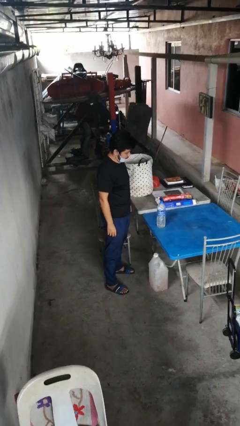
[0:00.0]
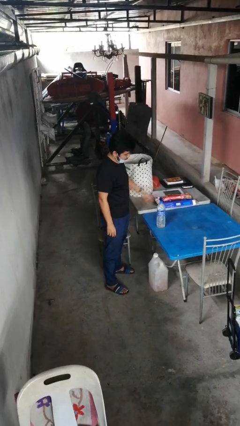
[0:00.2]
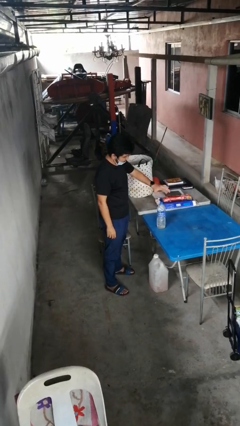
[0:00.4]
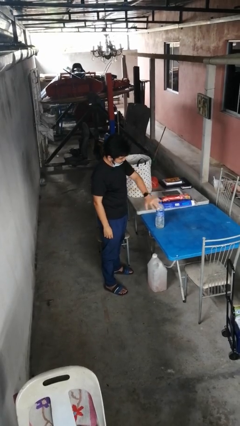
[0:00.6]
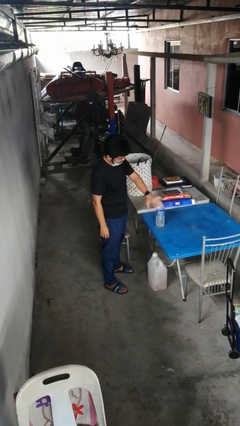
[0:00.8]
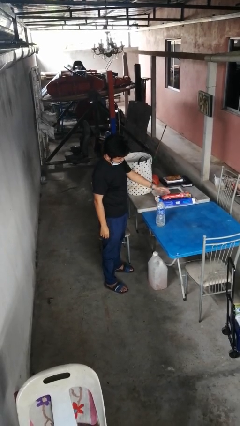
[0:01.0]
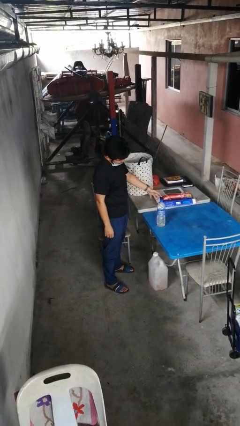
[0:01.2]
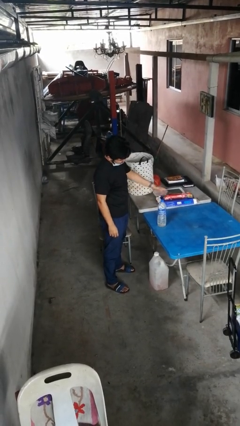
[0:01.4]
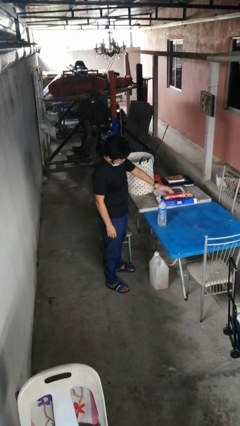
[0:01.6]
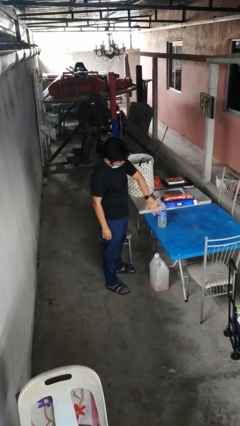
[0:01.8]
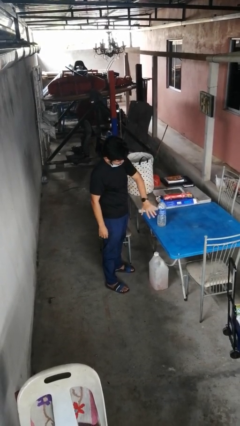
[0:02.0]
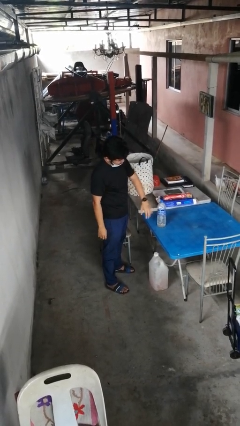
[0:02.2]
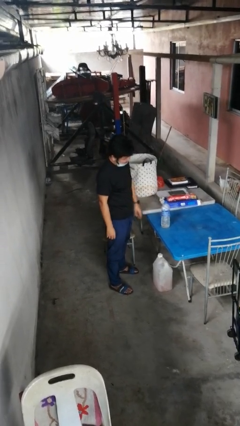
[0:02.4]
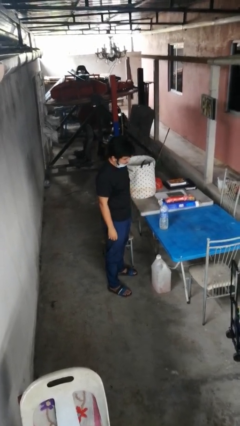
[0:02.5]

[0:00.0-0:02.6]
person waves hand over object

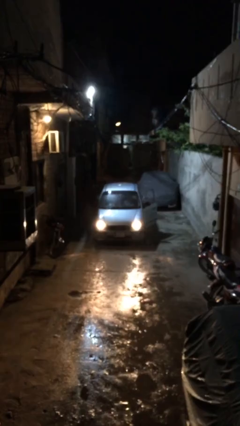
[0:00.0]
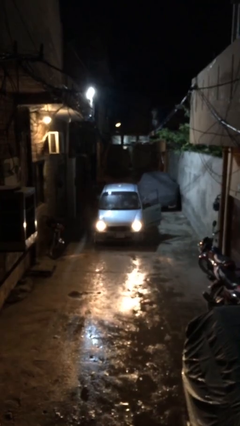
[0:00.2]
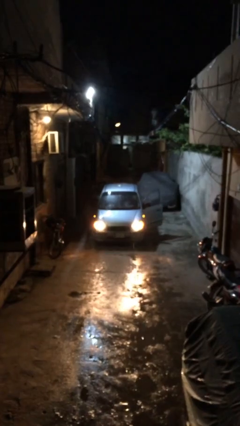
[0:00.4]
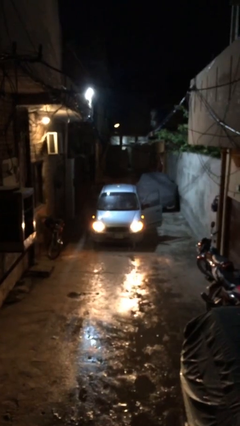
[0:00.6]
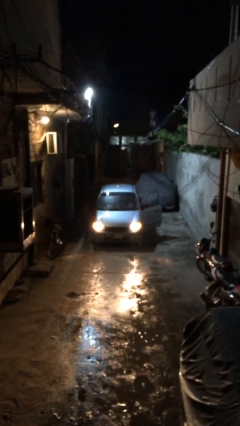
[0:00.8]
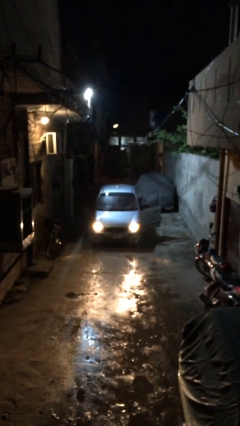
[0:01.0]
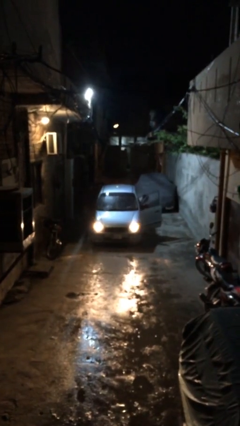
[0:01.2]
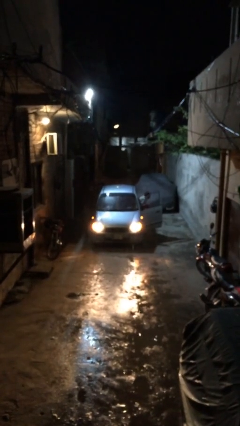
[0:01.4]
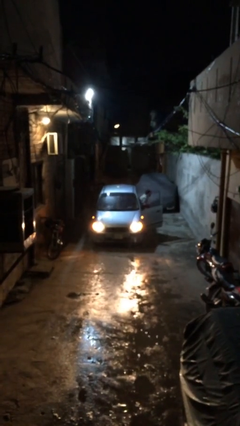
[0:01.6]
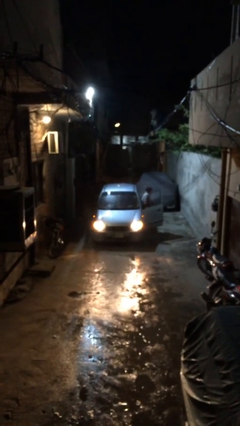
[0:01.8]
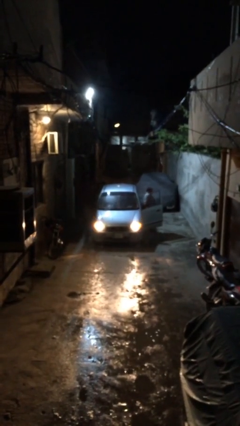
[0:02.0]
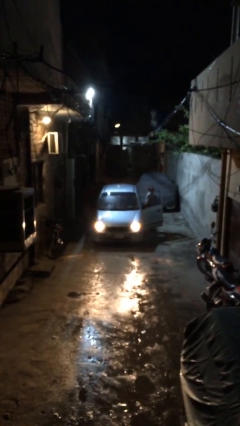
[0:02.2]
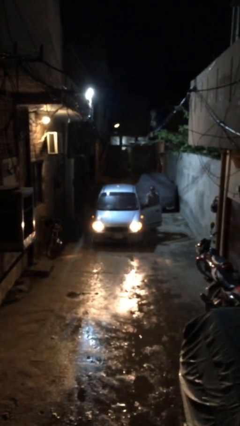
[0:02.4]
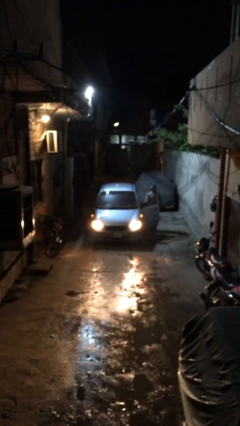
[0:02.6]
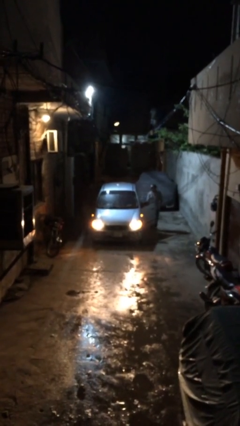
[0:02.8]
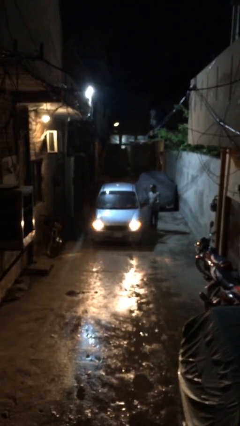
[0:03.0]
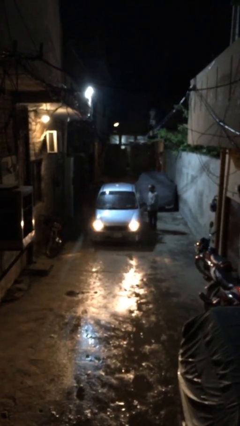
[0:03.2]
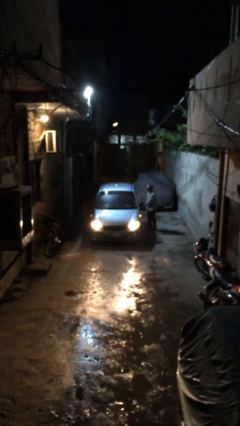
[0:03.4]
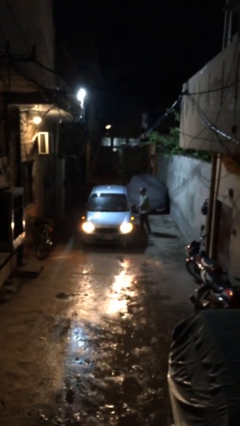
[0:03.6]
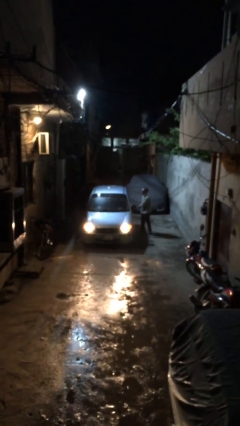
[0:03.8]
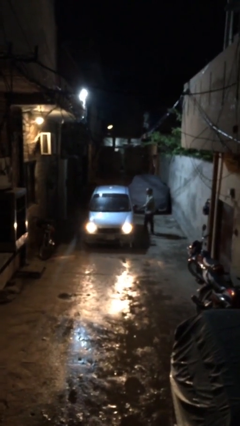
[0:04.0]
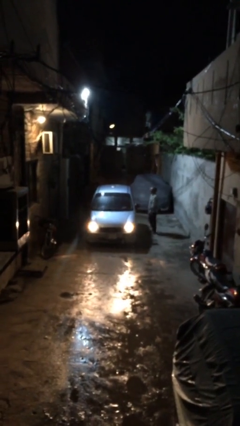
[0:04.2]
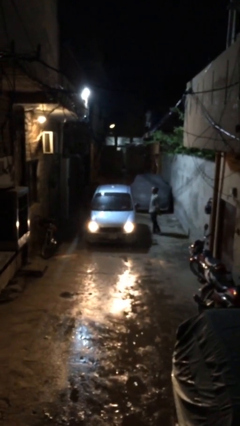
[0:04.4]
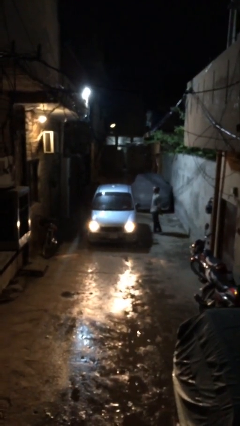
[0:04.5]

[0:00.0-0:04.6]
car drops off person

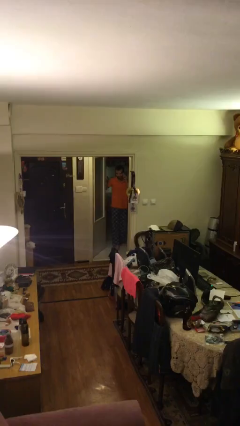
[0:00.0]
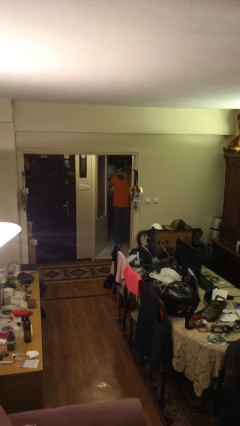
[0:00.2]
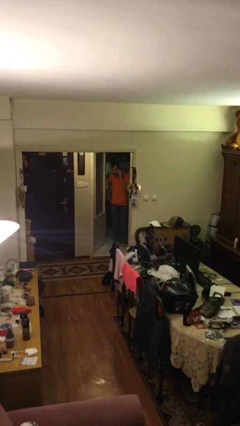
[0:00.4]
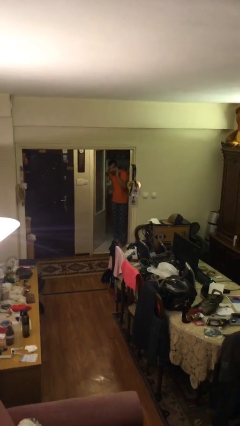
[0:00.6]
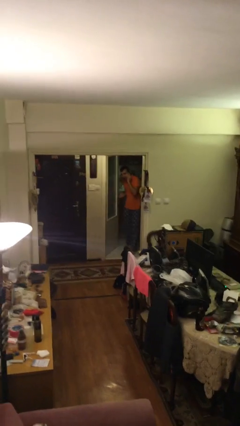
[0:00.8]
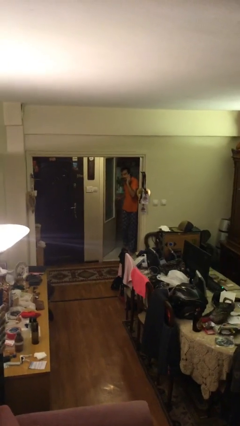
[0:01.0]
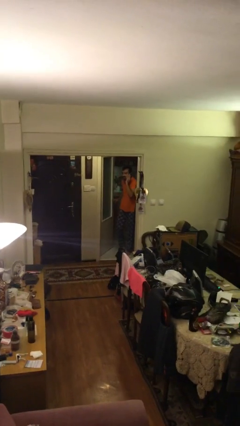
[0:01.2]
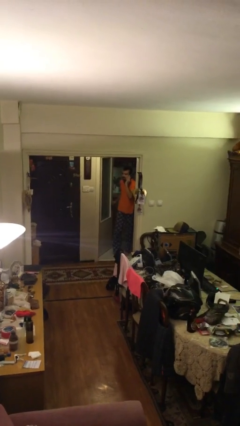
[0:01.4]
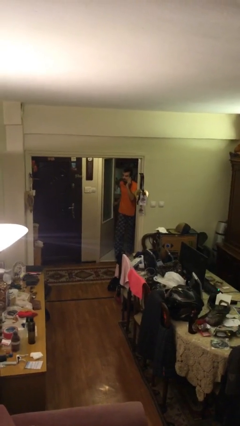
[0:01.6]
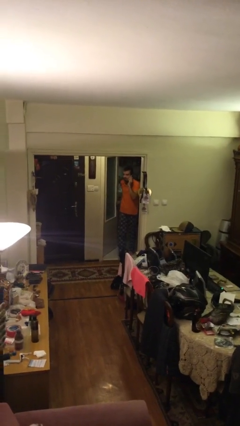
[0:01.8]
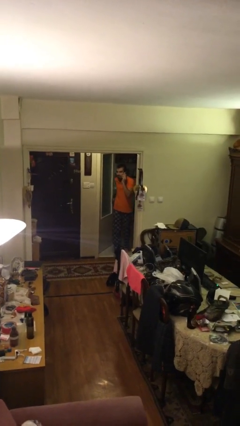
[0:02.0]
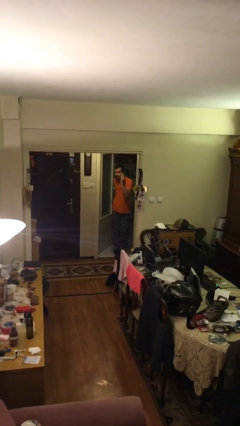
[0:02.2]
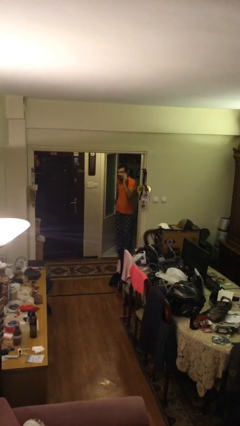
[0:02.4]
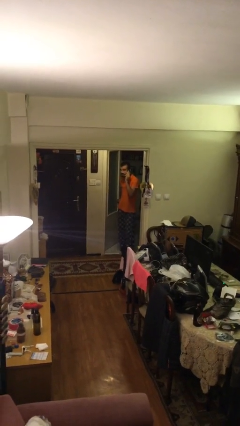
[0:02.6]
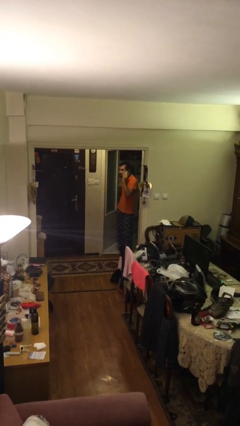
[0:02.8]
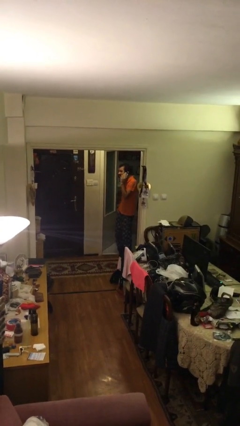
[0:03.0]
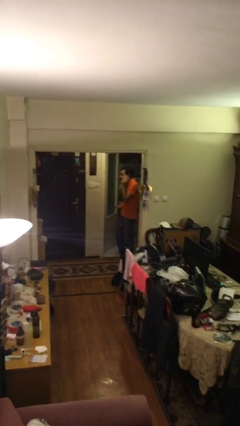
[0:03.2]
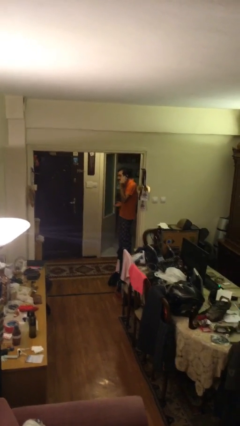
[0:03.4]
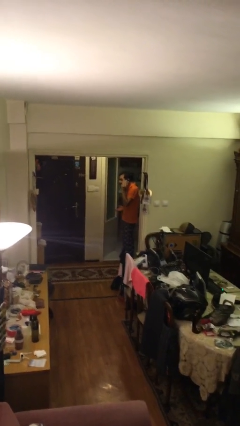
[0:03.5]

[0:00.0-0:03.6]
person enters scene through structure

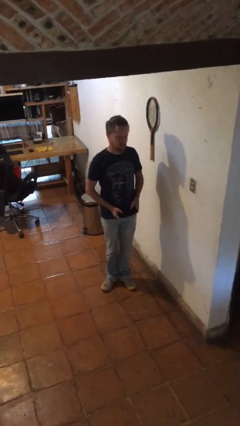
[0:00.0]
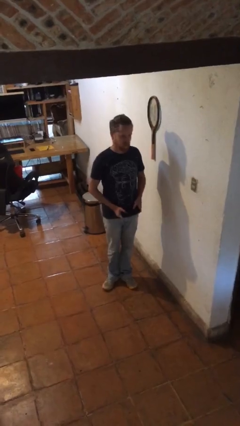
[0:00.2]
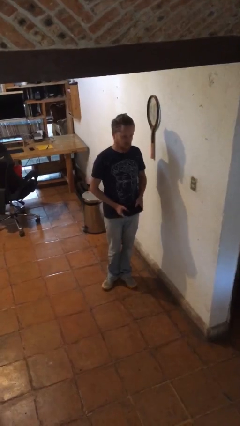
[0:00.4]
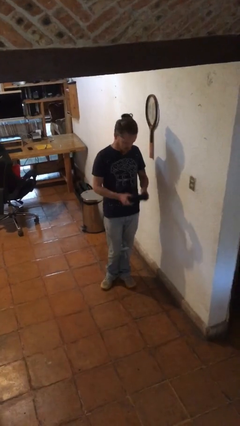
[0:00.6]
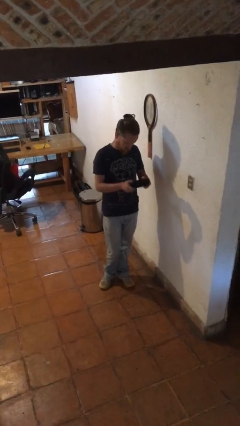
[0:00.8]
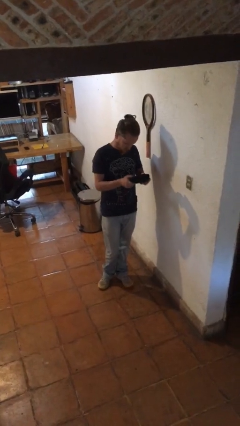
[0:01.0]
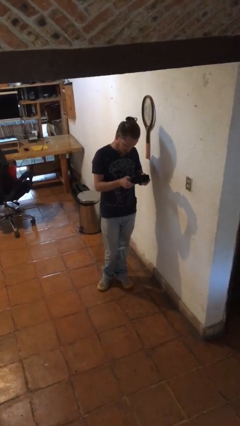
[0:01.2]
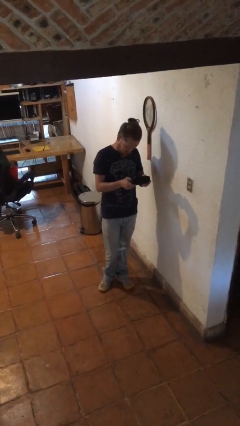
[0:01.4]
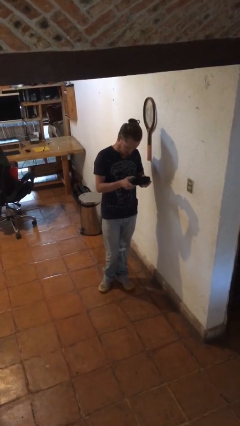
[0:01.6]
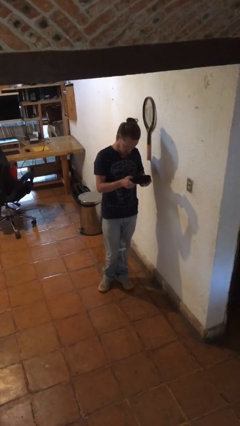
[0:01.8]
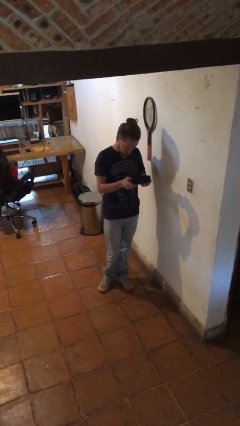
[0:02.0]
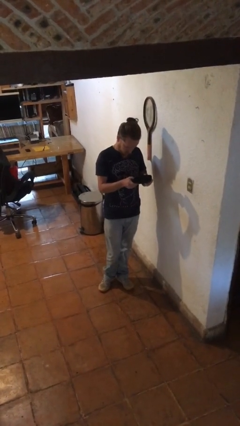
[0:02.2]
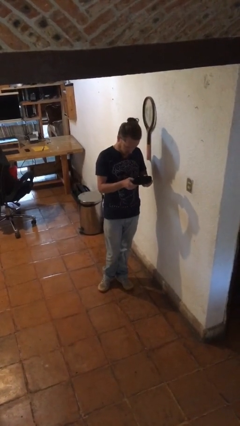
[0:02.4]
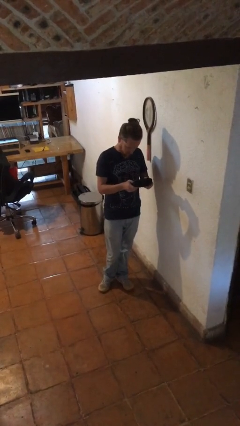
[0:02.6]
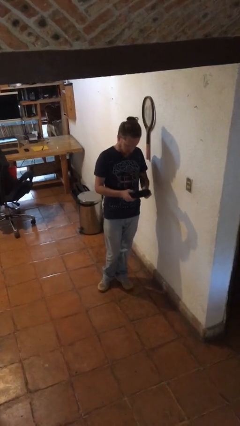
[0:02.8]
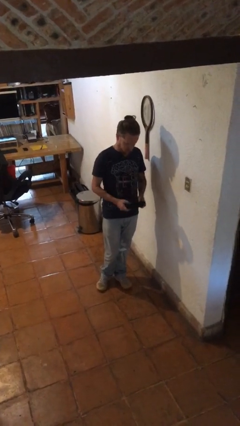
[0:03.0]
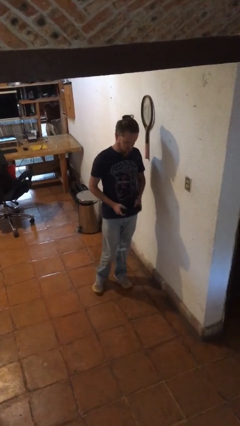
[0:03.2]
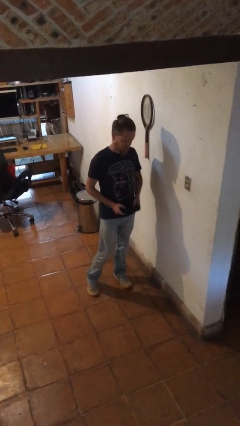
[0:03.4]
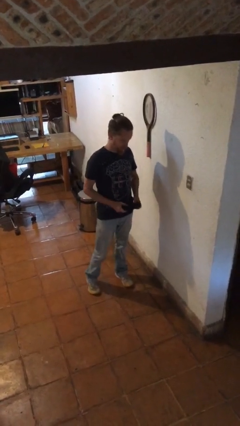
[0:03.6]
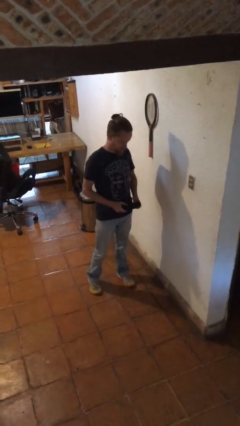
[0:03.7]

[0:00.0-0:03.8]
person interacts with handheld game

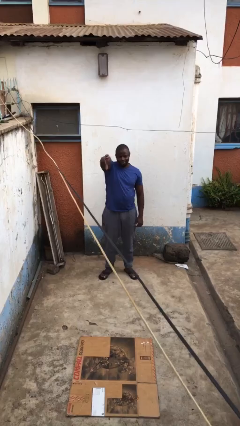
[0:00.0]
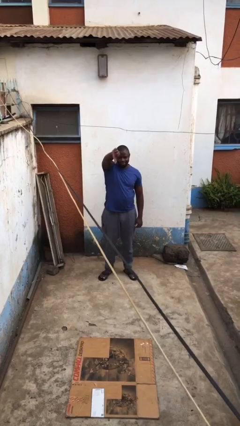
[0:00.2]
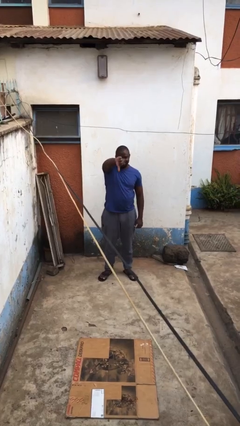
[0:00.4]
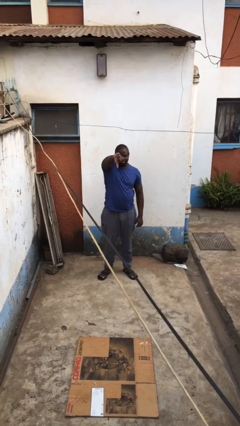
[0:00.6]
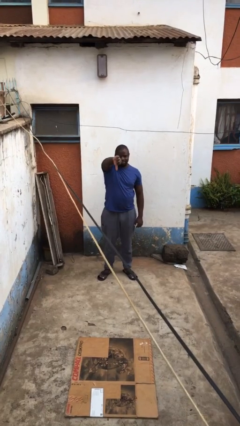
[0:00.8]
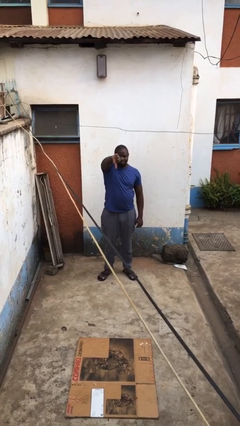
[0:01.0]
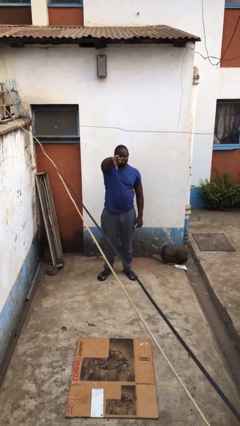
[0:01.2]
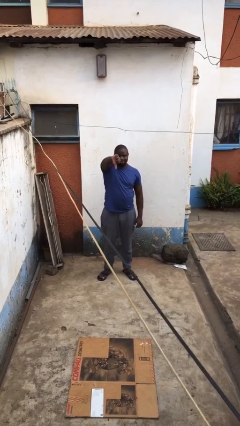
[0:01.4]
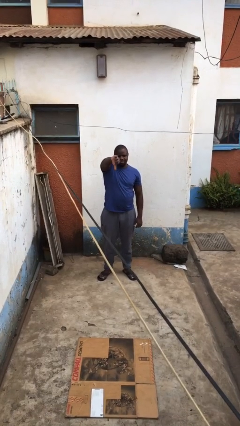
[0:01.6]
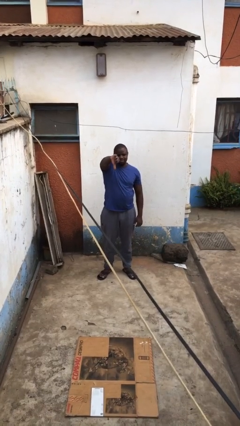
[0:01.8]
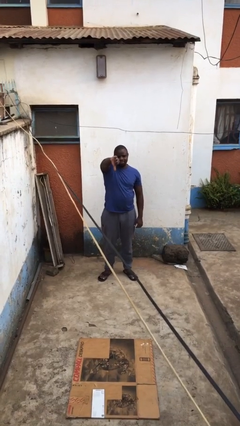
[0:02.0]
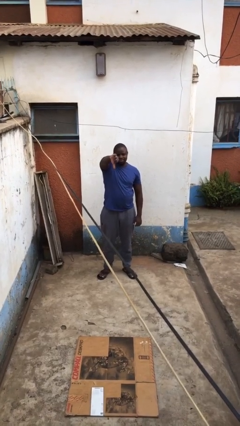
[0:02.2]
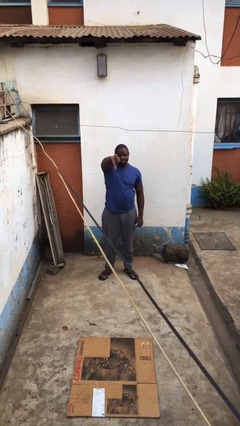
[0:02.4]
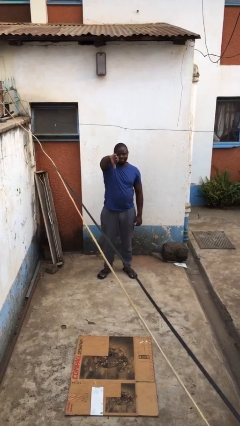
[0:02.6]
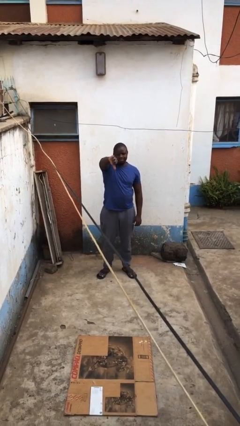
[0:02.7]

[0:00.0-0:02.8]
person gestures thumbs down

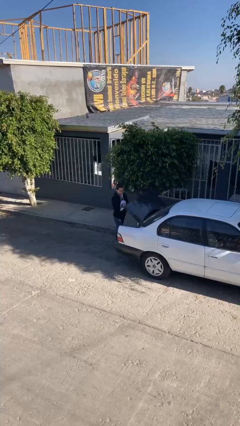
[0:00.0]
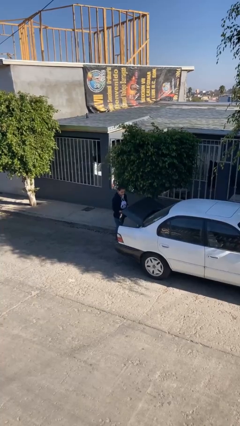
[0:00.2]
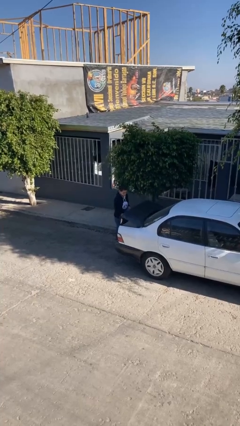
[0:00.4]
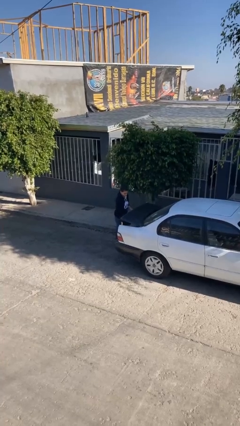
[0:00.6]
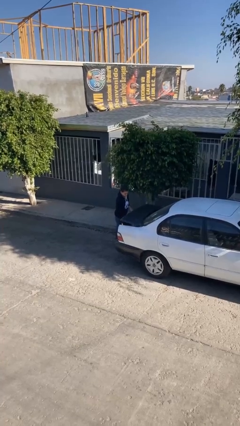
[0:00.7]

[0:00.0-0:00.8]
person closes car trunk
